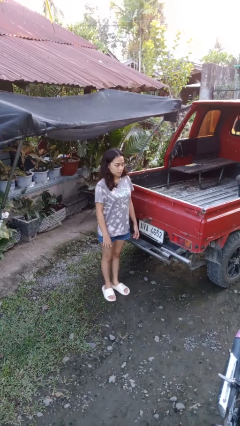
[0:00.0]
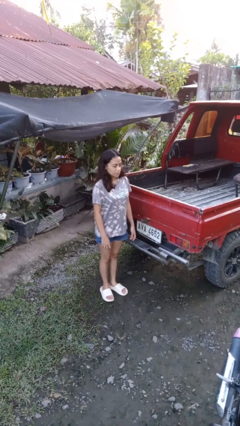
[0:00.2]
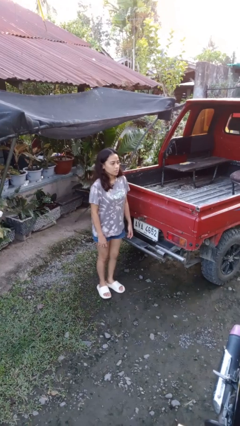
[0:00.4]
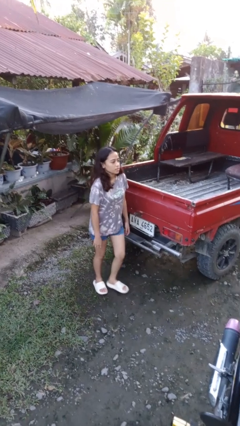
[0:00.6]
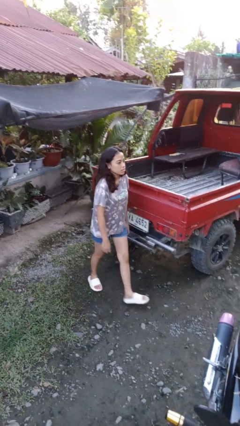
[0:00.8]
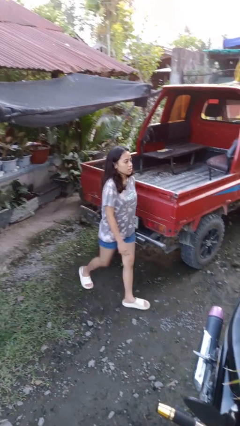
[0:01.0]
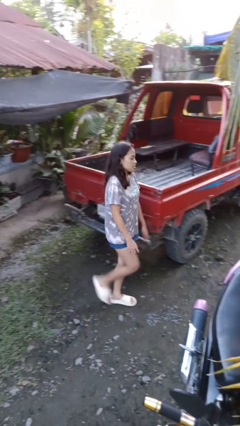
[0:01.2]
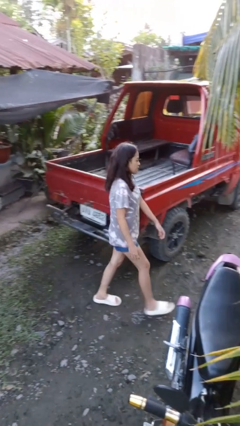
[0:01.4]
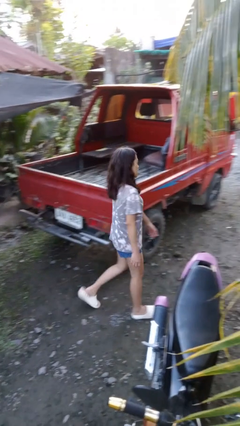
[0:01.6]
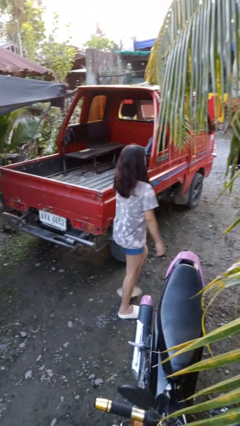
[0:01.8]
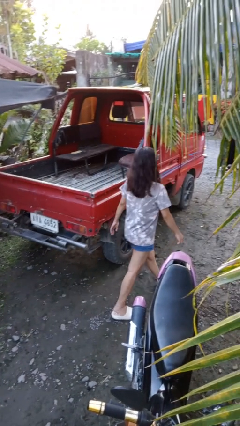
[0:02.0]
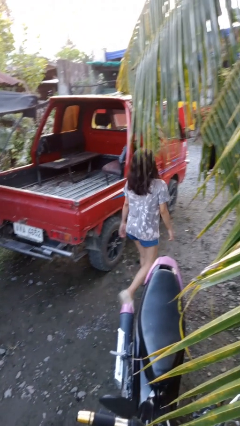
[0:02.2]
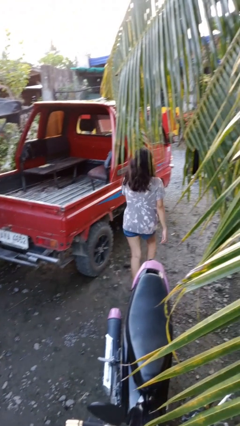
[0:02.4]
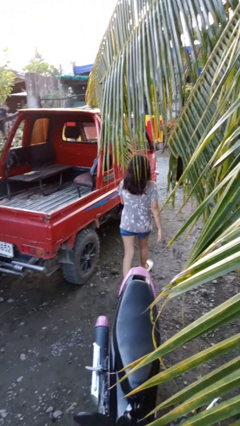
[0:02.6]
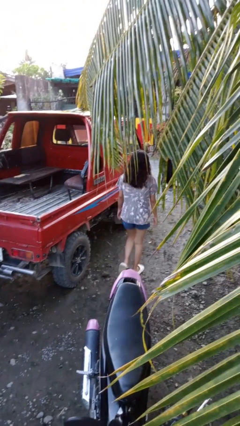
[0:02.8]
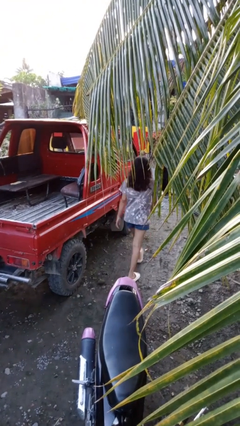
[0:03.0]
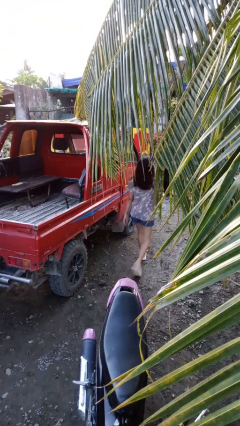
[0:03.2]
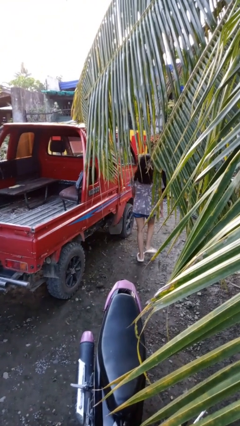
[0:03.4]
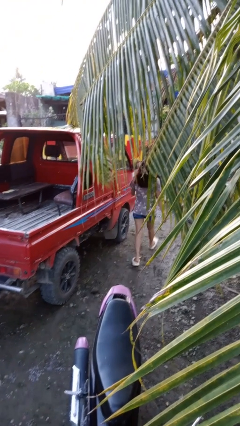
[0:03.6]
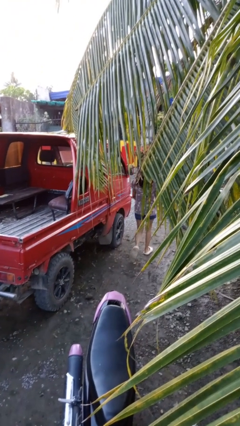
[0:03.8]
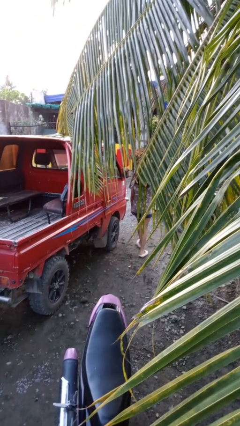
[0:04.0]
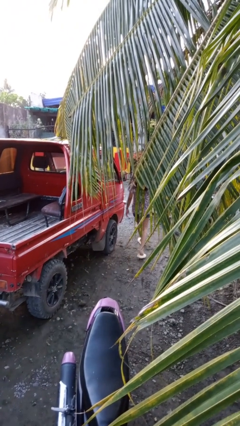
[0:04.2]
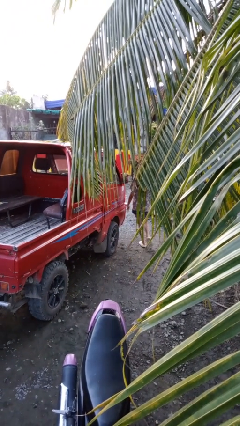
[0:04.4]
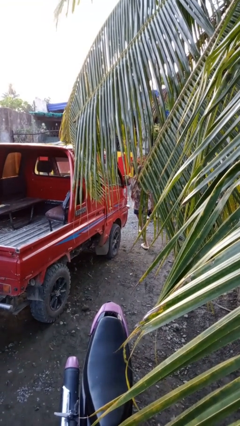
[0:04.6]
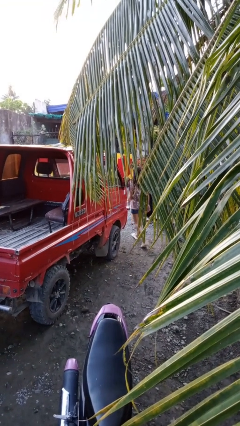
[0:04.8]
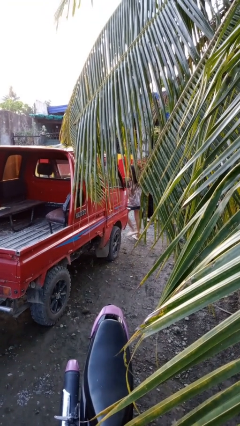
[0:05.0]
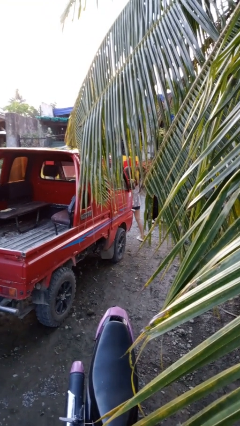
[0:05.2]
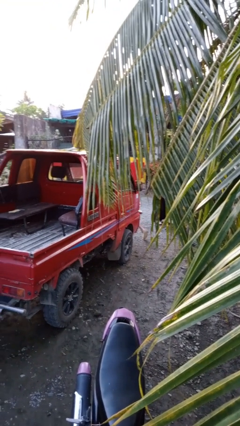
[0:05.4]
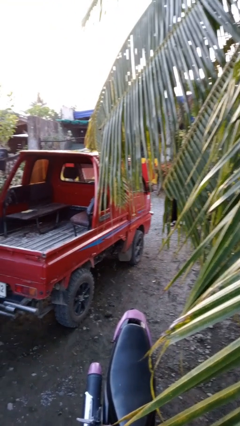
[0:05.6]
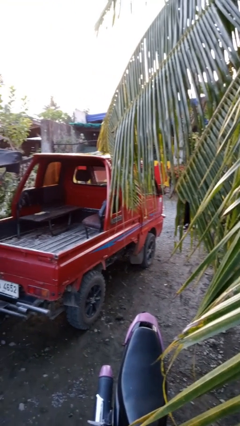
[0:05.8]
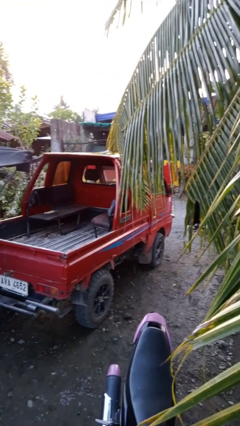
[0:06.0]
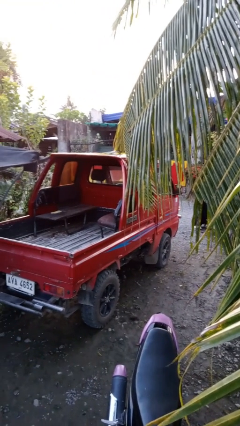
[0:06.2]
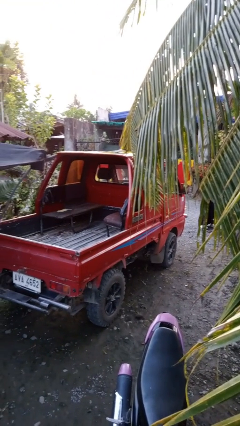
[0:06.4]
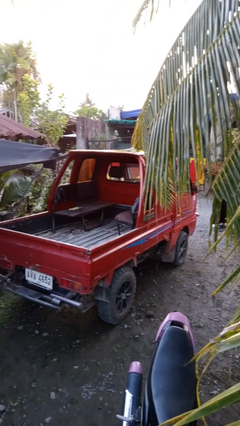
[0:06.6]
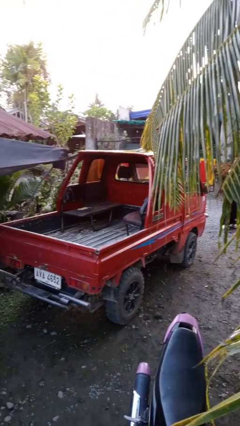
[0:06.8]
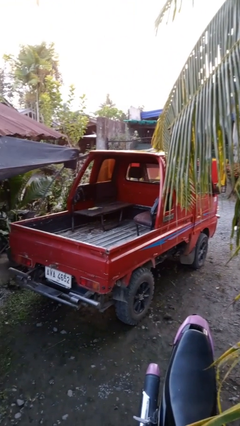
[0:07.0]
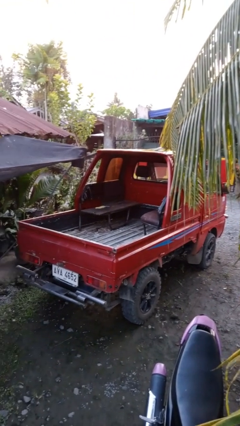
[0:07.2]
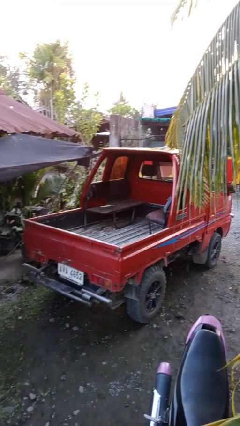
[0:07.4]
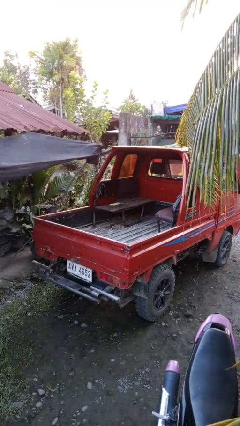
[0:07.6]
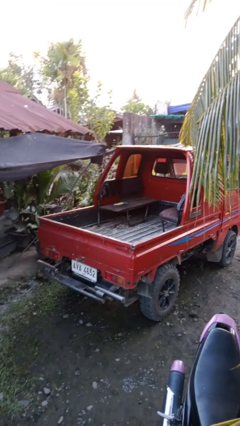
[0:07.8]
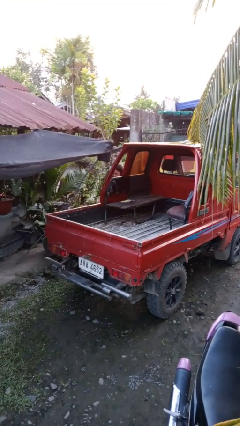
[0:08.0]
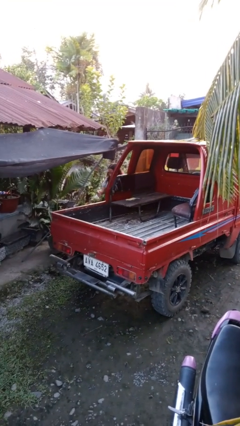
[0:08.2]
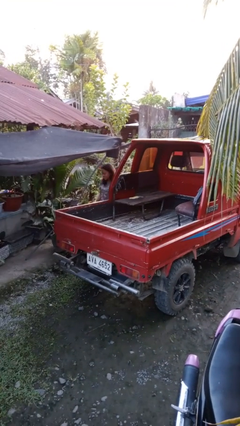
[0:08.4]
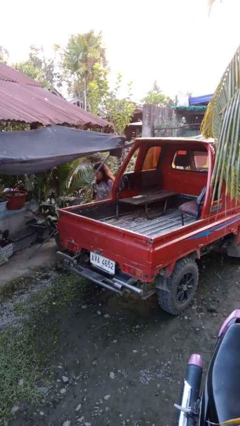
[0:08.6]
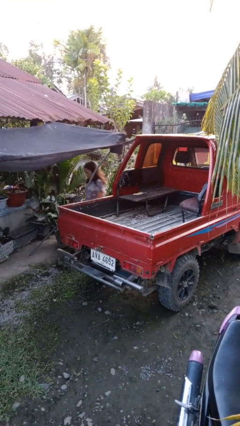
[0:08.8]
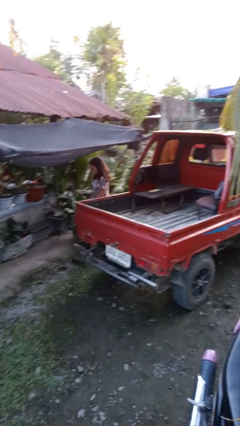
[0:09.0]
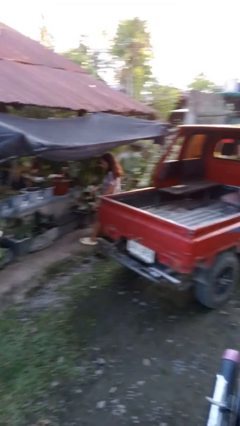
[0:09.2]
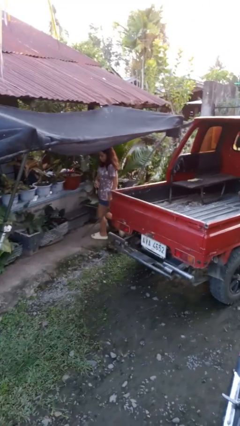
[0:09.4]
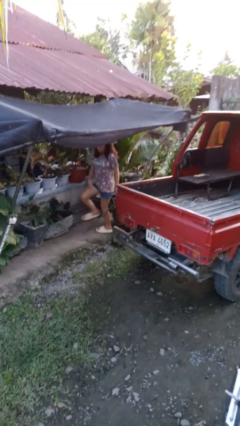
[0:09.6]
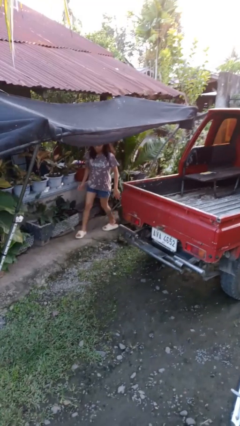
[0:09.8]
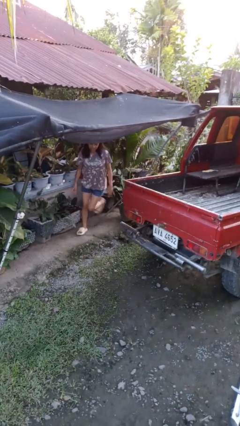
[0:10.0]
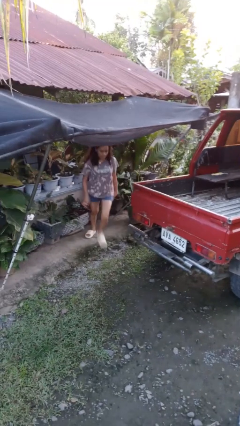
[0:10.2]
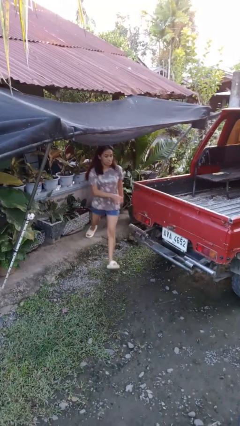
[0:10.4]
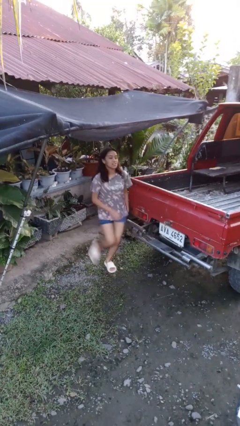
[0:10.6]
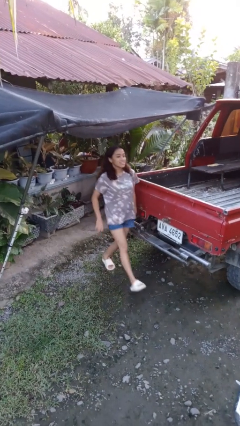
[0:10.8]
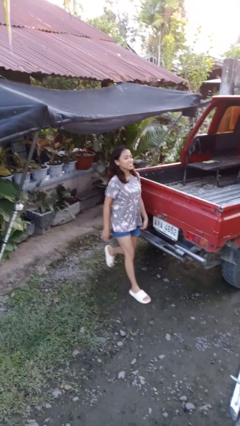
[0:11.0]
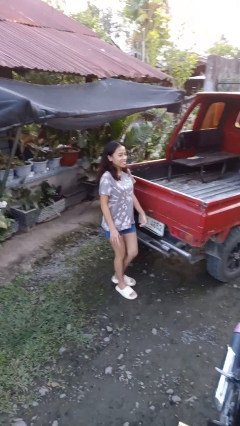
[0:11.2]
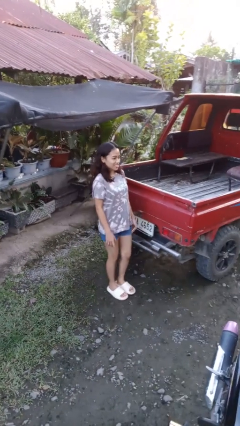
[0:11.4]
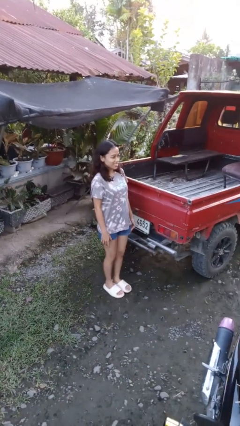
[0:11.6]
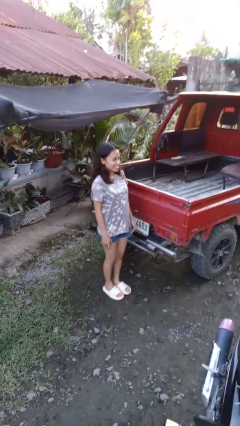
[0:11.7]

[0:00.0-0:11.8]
person walks around car

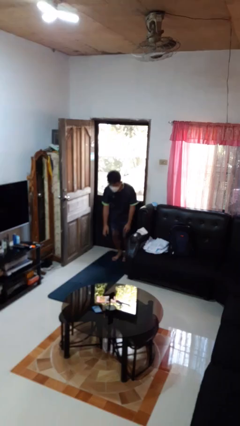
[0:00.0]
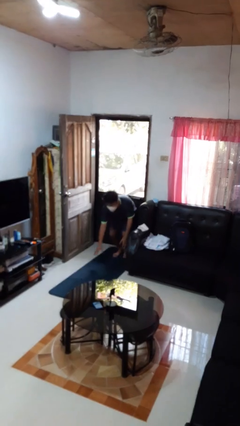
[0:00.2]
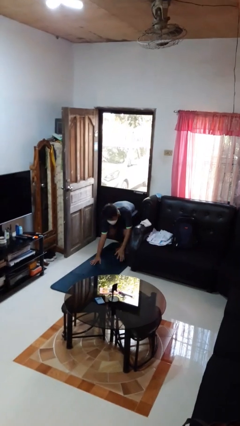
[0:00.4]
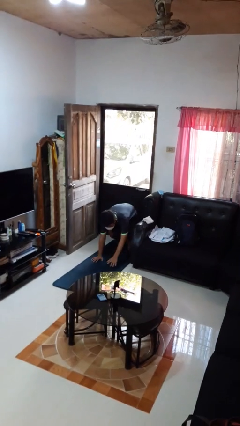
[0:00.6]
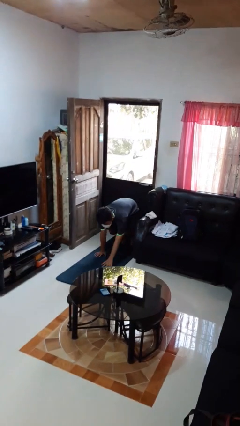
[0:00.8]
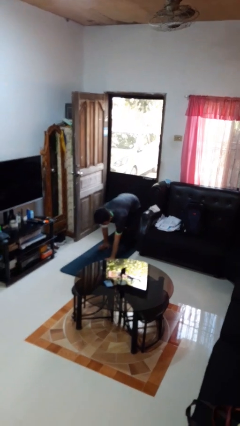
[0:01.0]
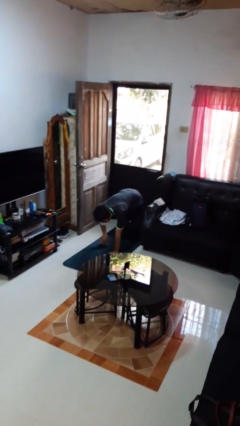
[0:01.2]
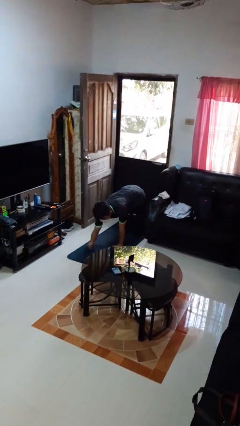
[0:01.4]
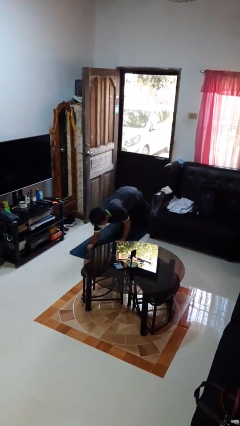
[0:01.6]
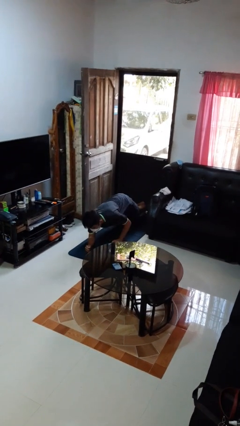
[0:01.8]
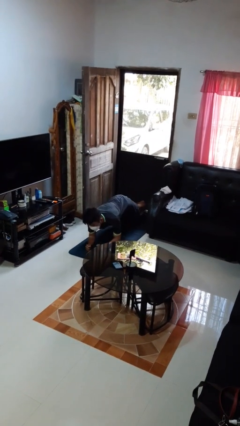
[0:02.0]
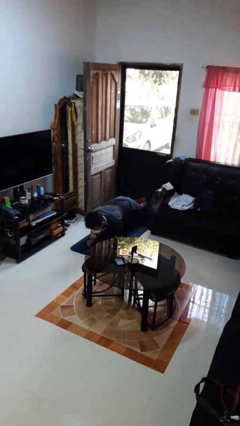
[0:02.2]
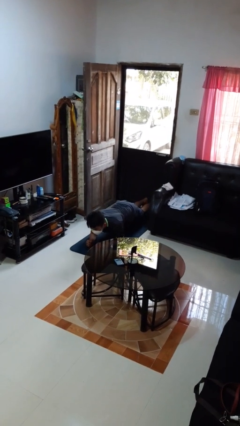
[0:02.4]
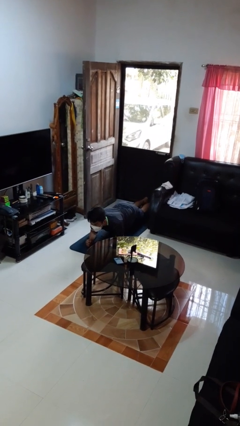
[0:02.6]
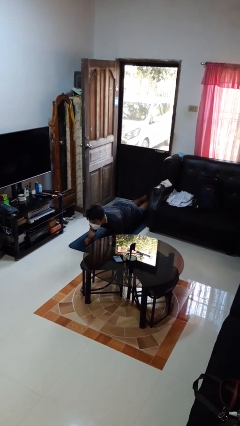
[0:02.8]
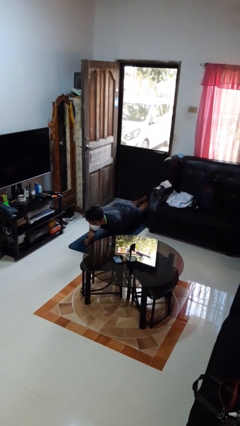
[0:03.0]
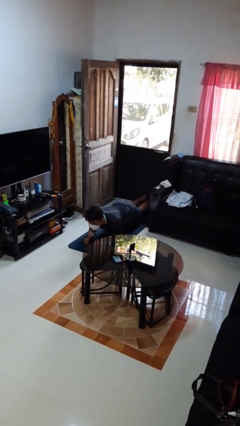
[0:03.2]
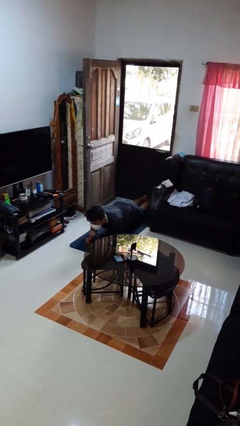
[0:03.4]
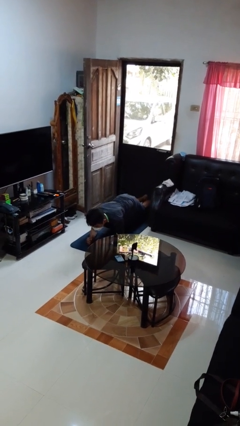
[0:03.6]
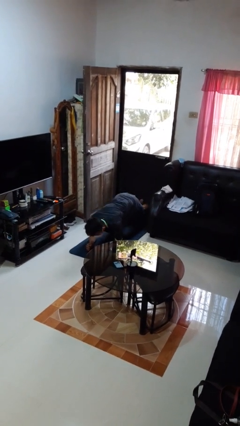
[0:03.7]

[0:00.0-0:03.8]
person exercises with plank

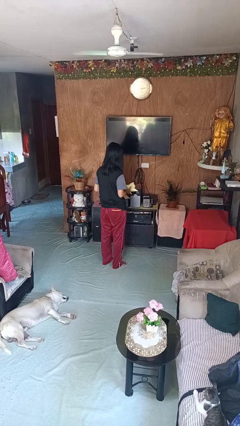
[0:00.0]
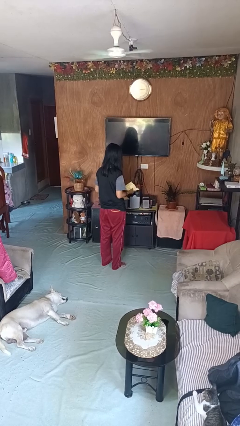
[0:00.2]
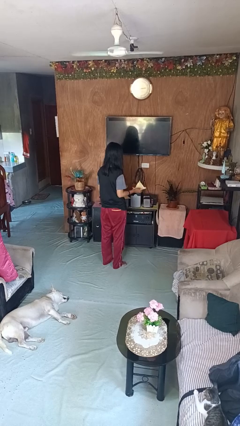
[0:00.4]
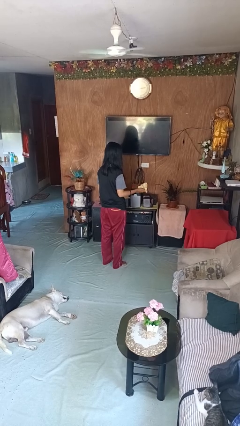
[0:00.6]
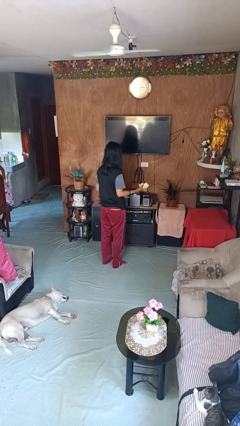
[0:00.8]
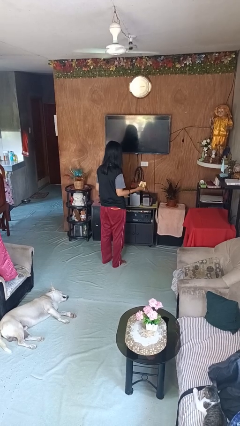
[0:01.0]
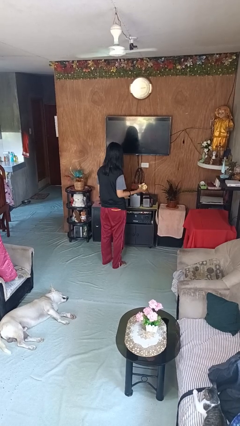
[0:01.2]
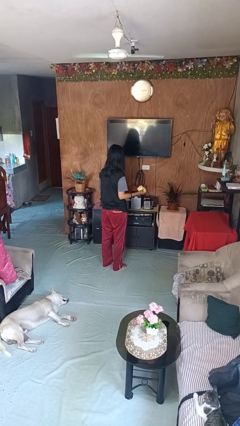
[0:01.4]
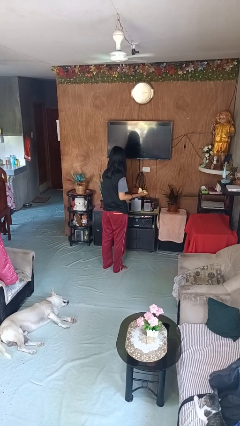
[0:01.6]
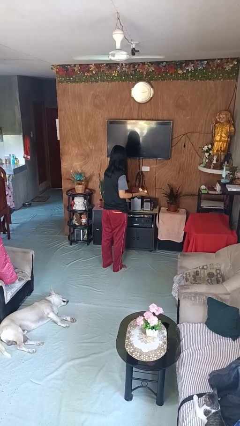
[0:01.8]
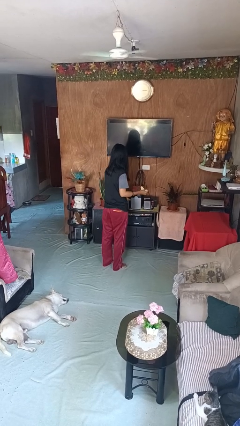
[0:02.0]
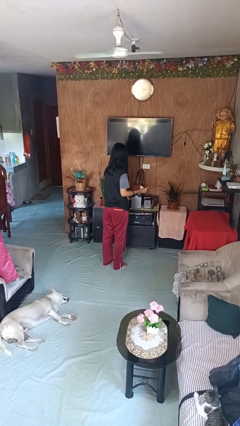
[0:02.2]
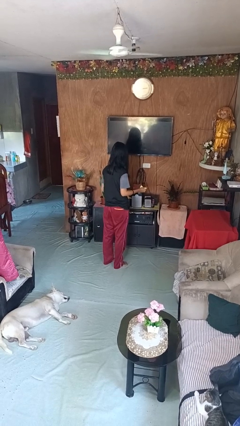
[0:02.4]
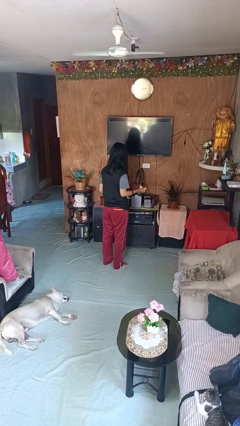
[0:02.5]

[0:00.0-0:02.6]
person crumples paper
